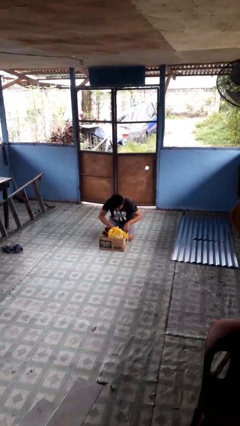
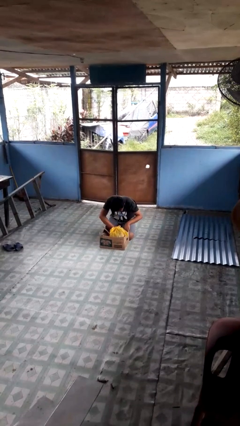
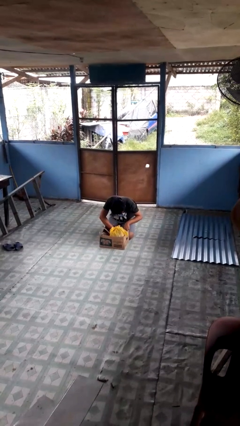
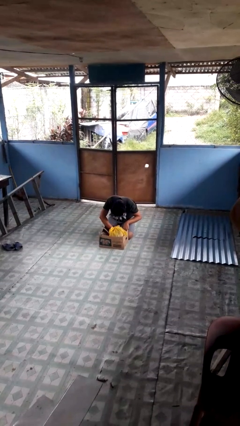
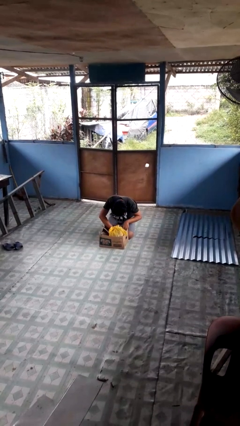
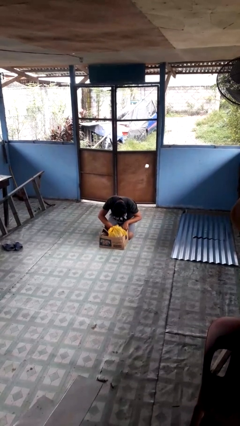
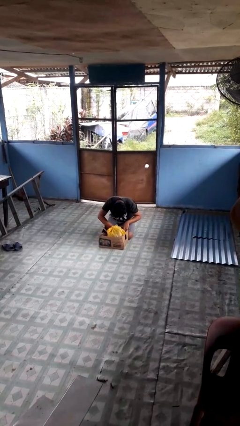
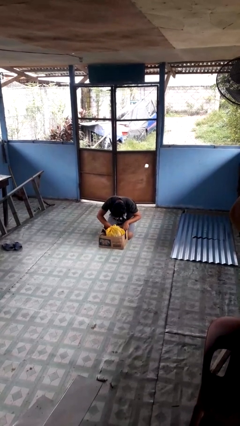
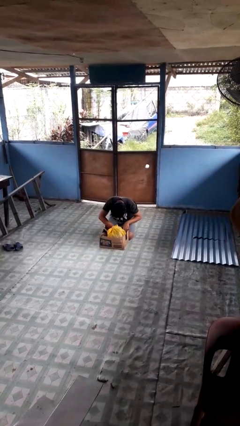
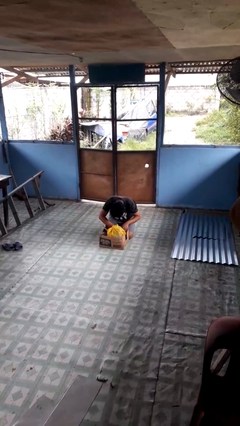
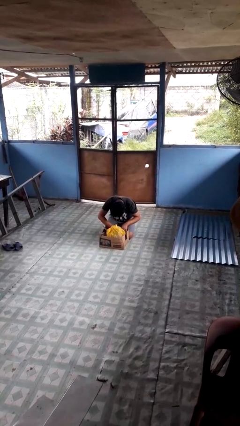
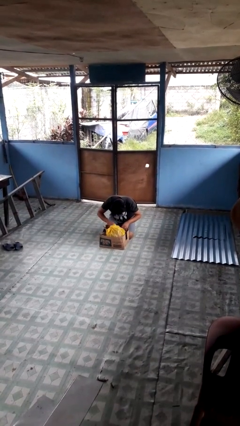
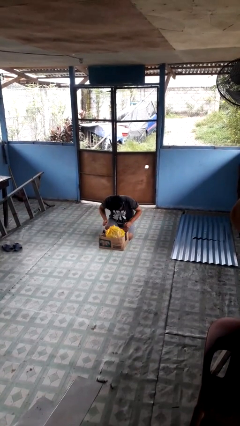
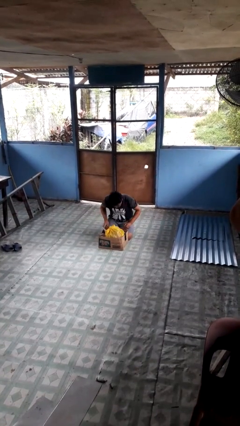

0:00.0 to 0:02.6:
person searches in box

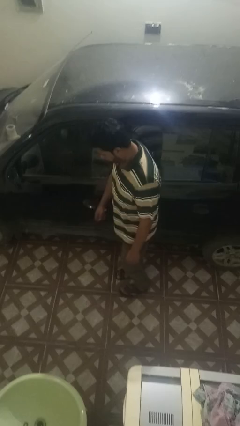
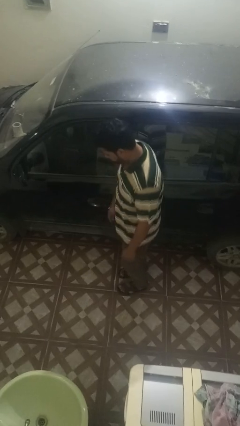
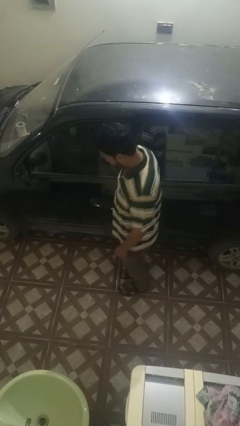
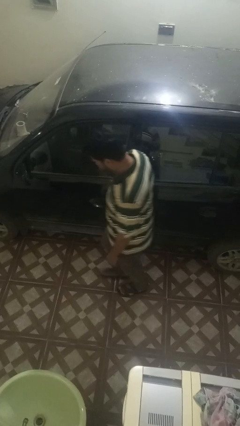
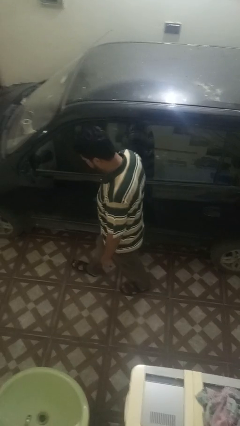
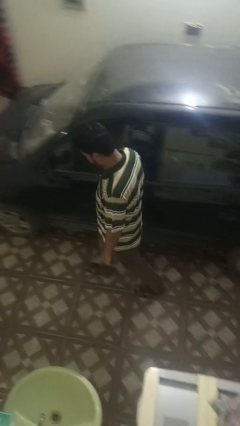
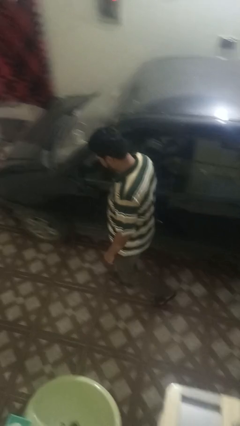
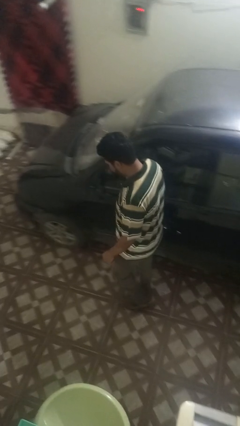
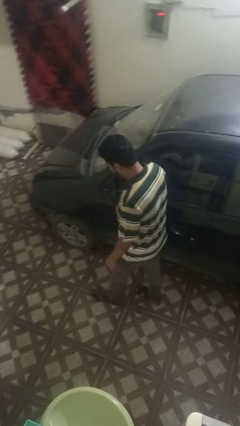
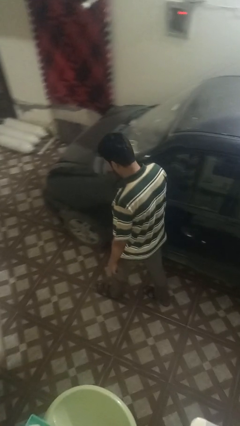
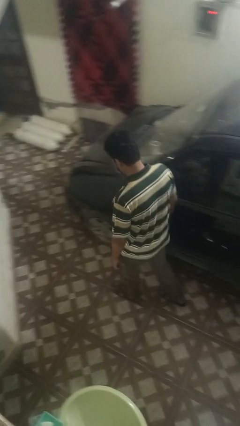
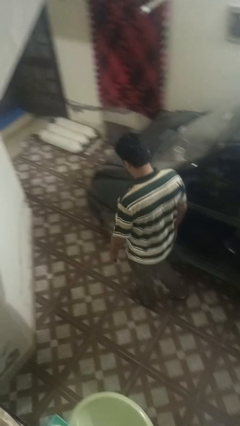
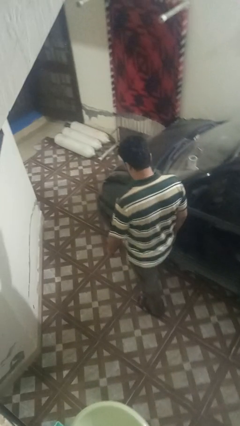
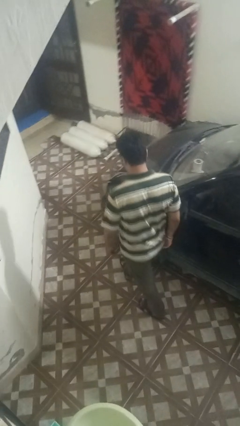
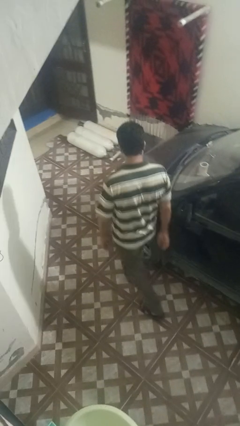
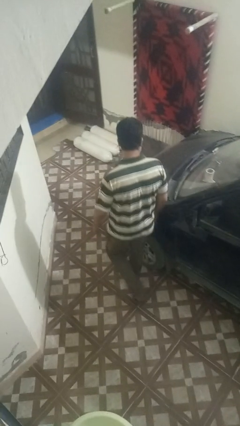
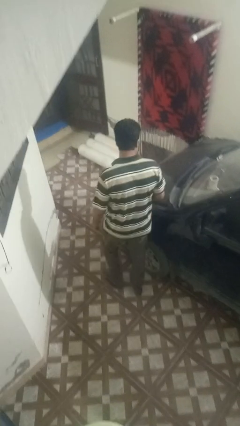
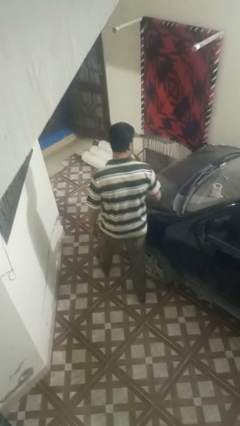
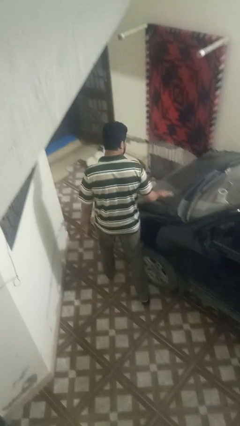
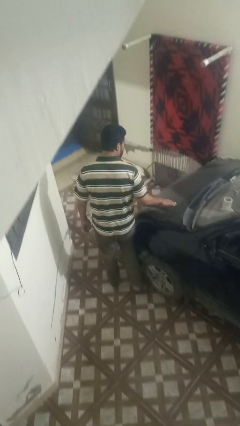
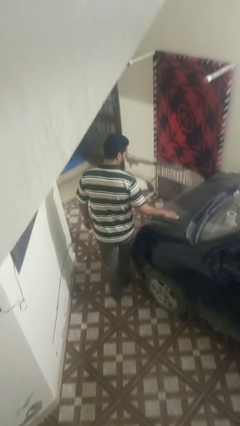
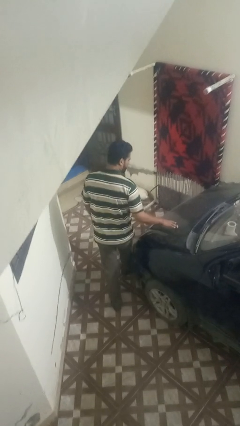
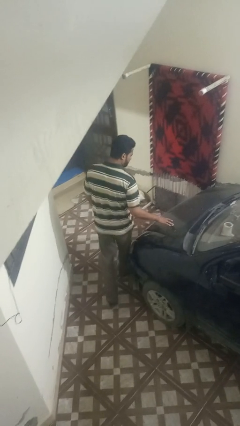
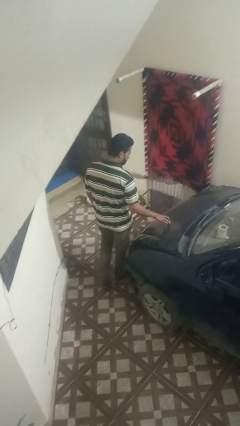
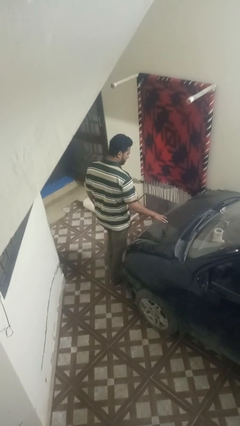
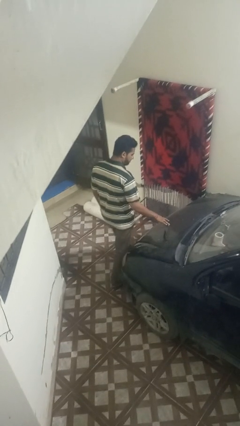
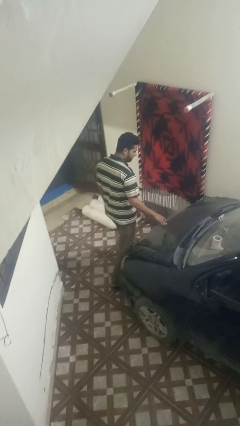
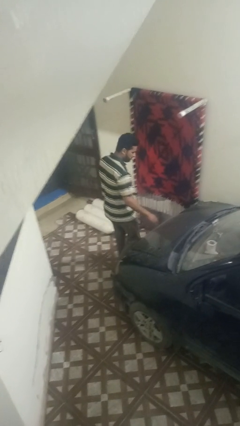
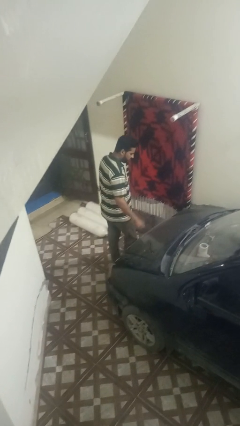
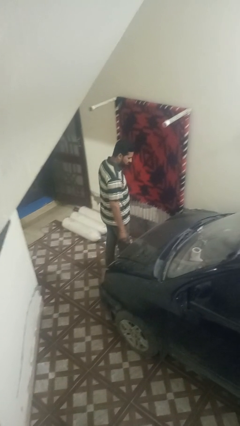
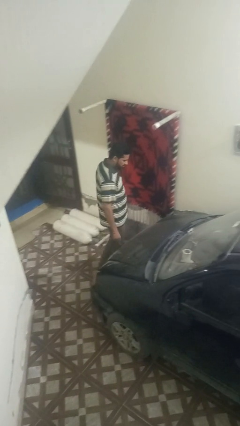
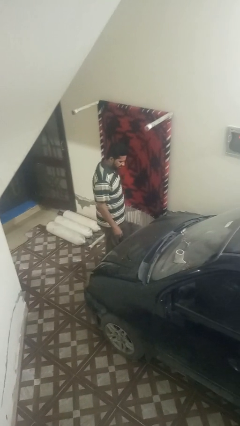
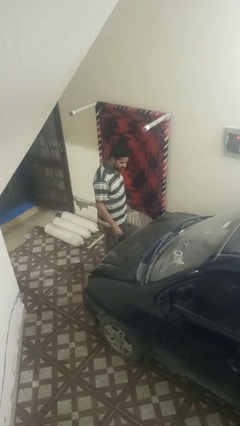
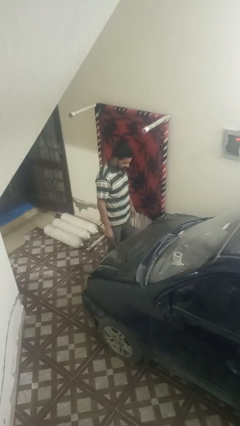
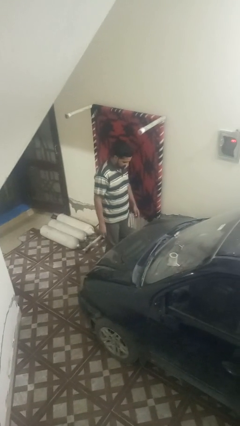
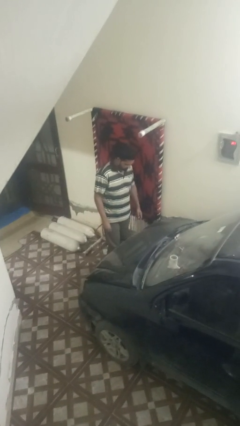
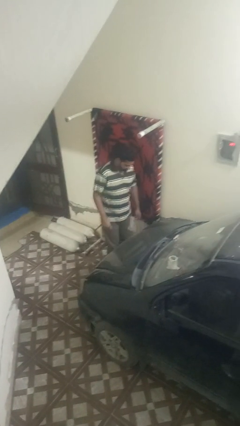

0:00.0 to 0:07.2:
person walks around car

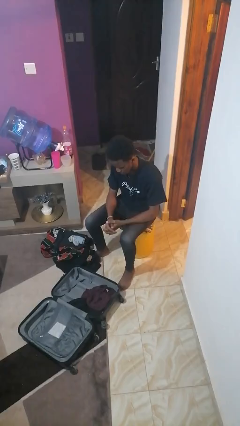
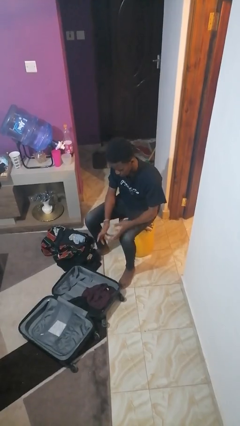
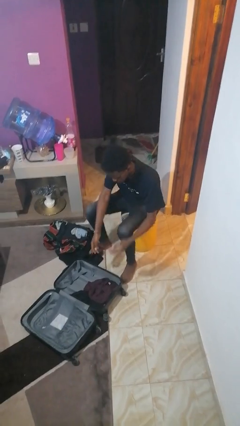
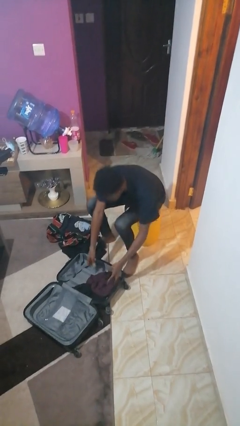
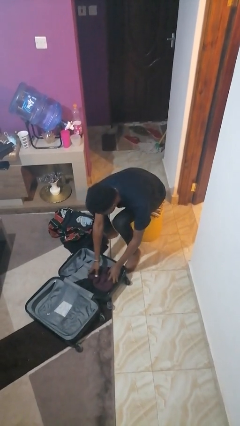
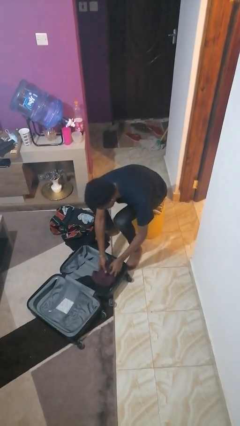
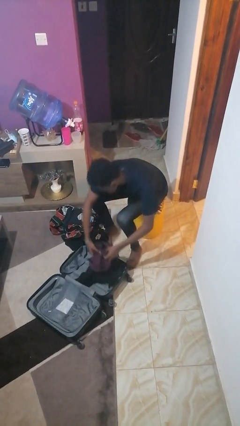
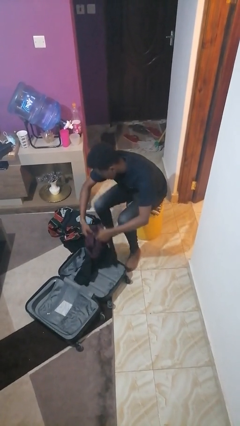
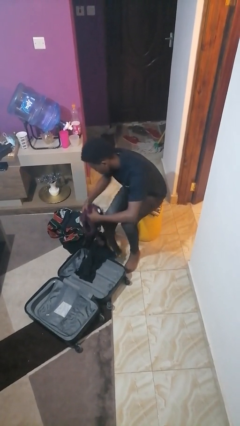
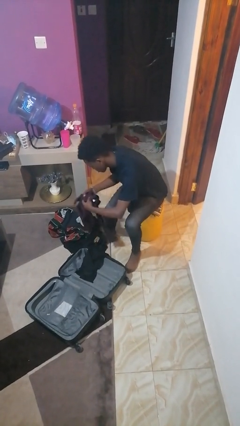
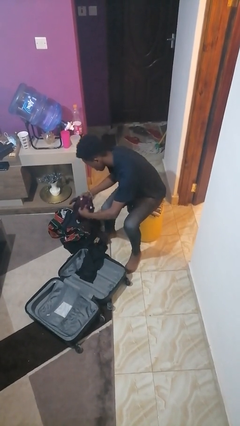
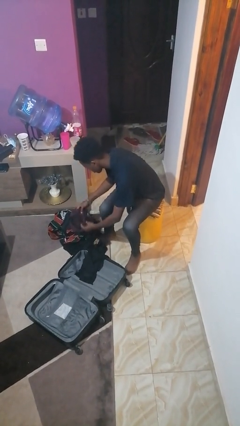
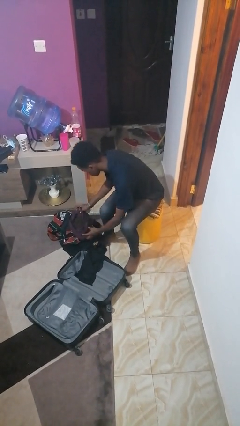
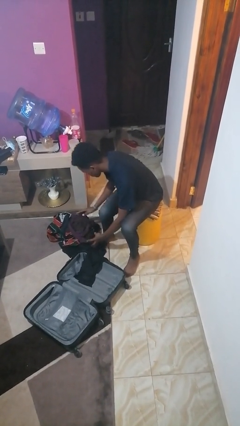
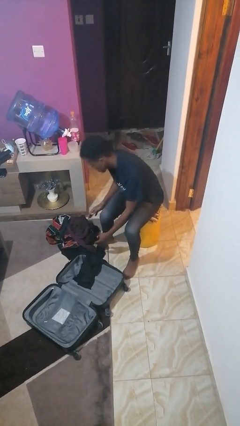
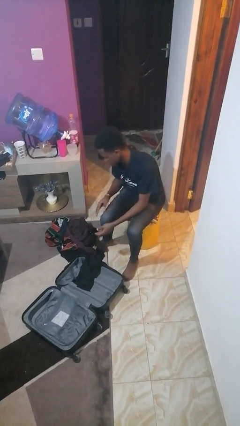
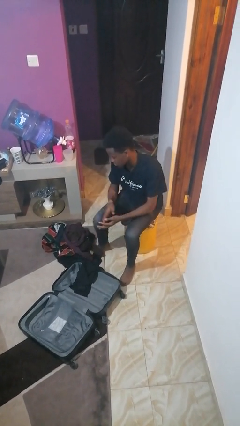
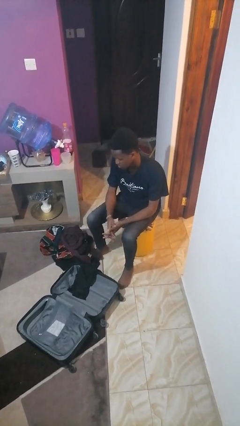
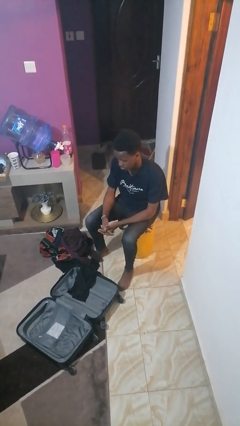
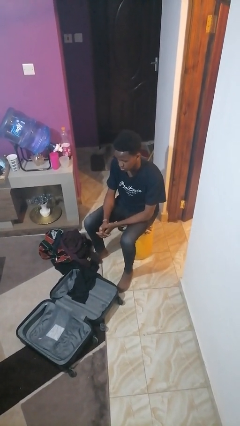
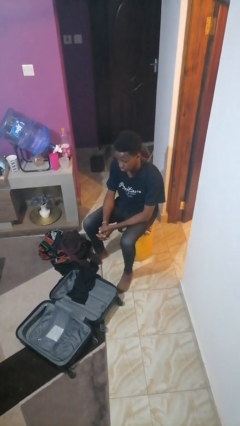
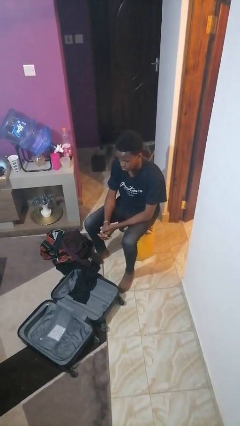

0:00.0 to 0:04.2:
person unloads clothes from suitcase

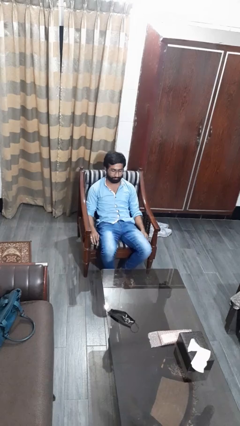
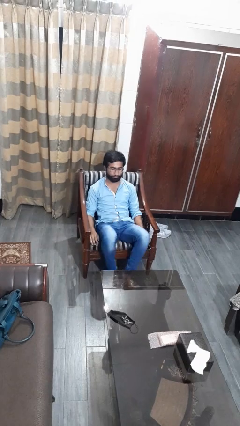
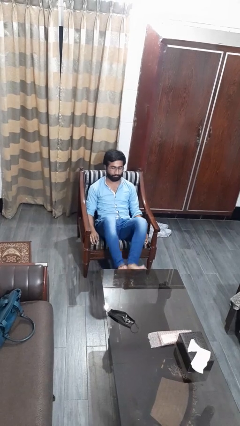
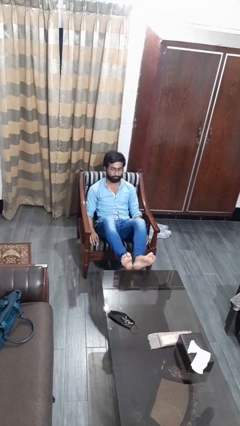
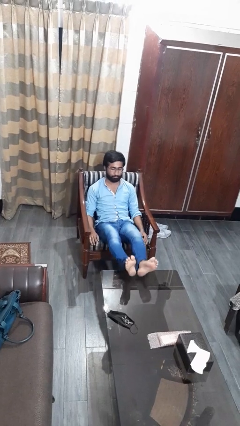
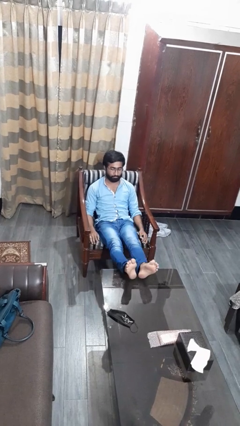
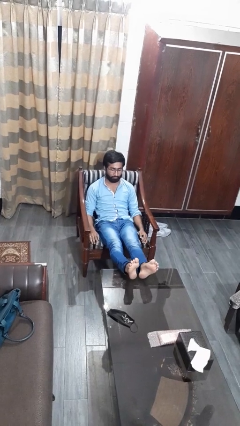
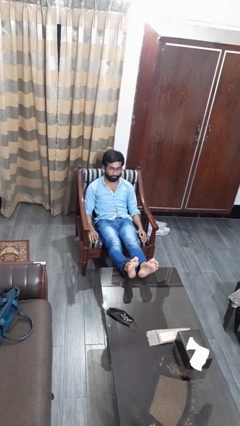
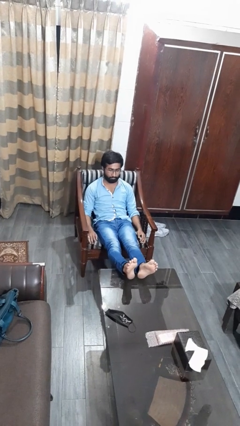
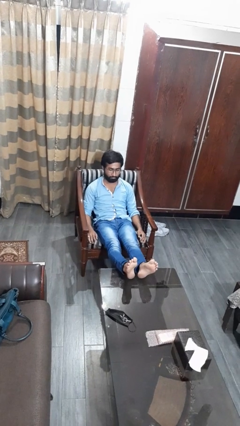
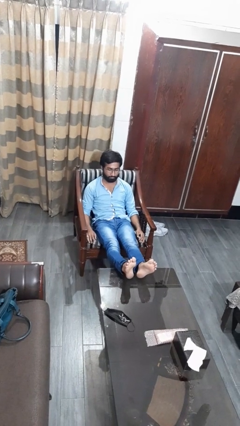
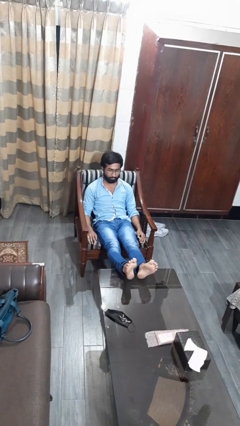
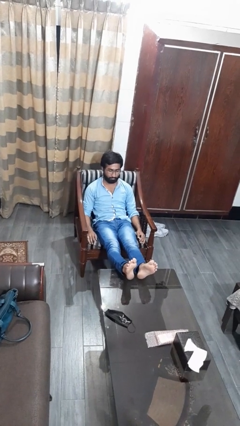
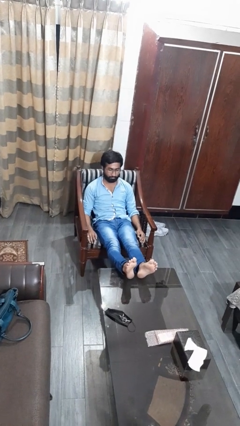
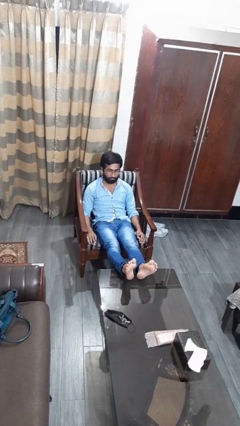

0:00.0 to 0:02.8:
person puts feet up

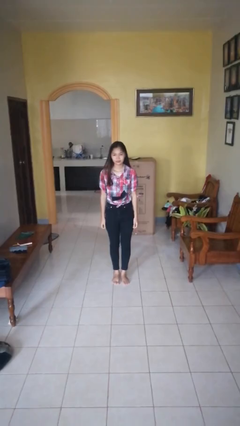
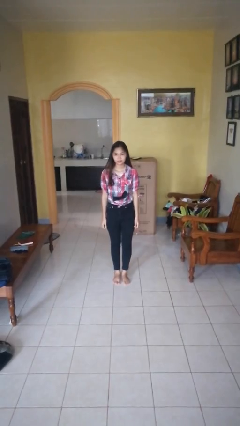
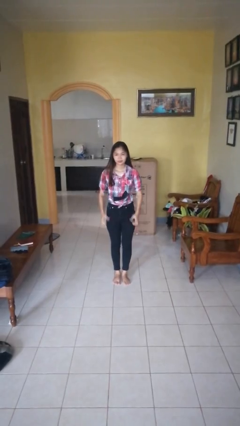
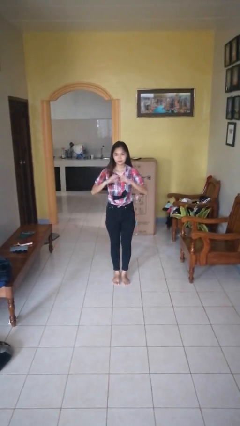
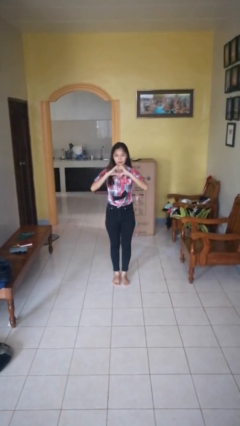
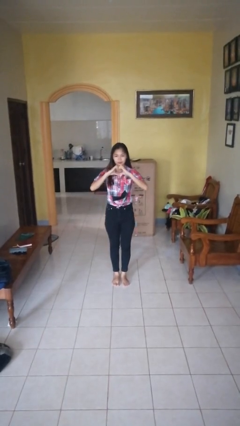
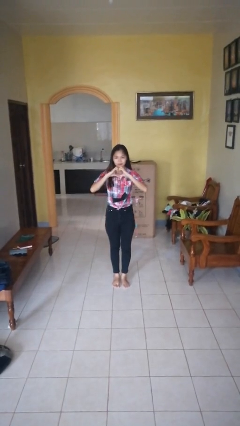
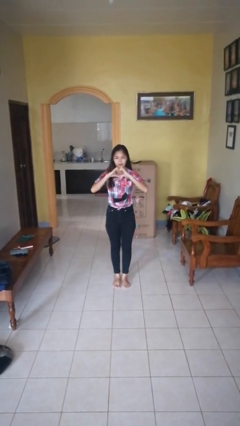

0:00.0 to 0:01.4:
person gestures heart
